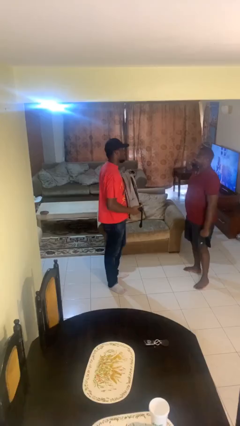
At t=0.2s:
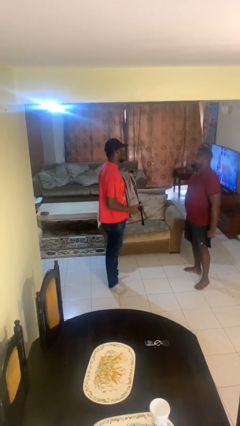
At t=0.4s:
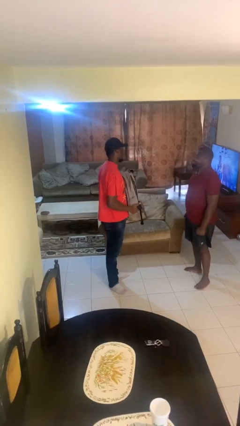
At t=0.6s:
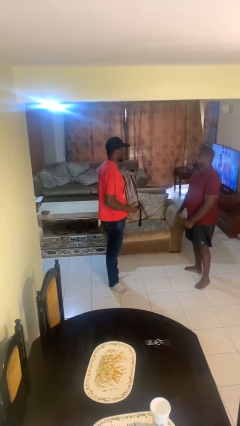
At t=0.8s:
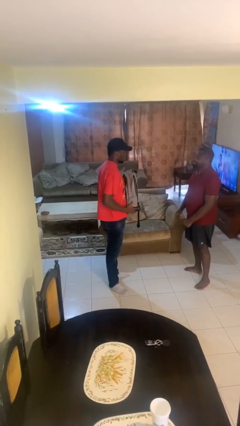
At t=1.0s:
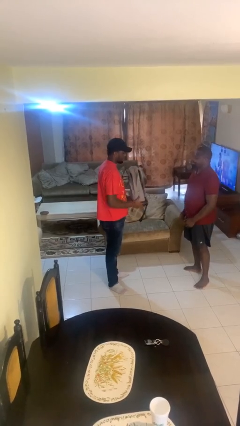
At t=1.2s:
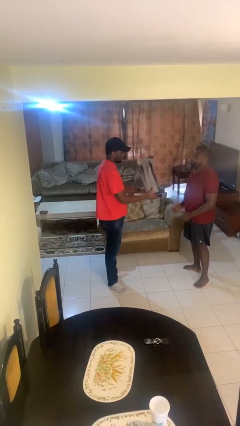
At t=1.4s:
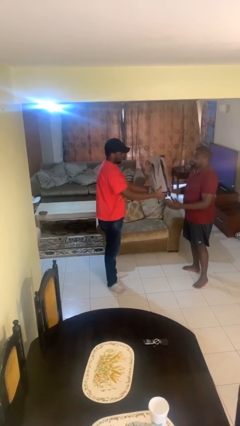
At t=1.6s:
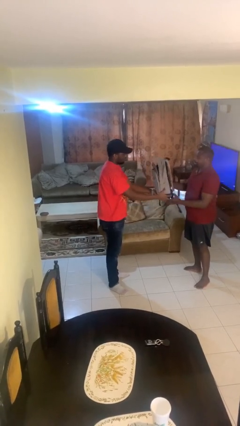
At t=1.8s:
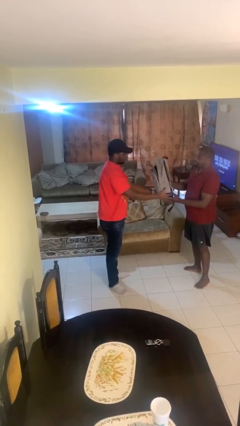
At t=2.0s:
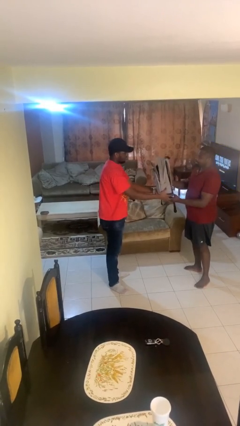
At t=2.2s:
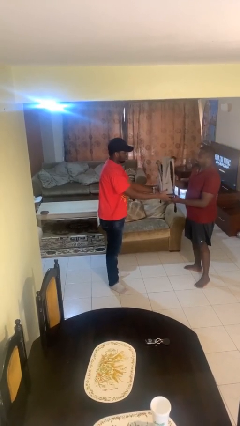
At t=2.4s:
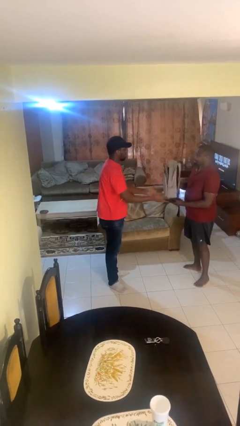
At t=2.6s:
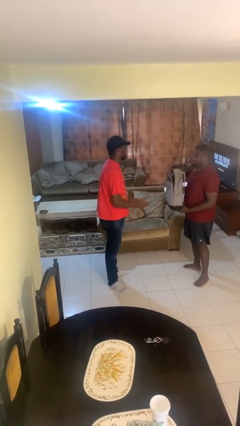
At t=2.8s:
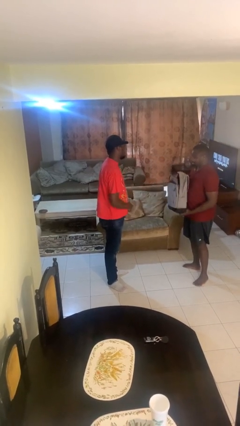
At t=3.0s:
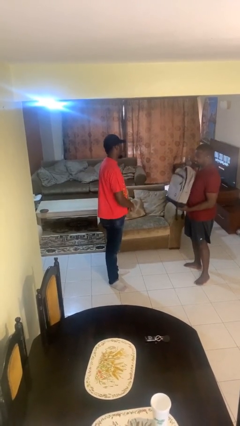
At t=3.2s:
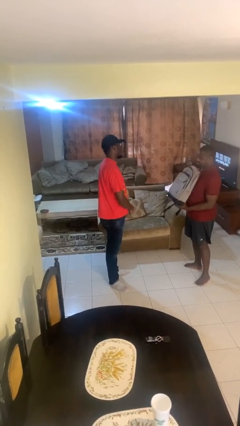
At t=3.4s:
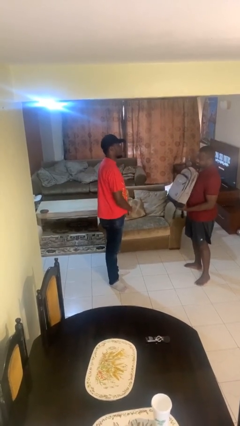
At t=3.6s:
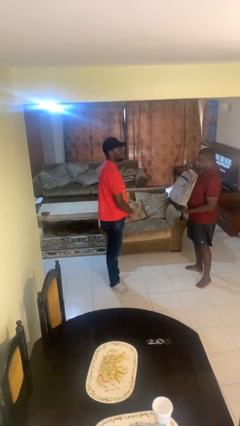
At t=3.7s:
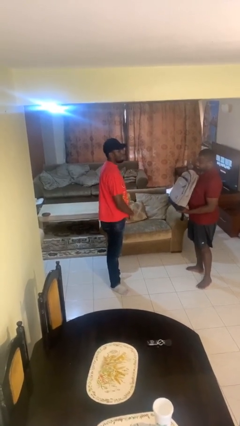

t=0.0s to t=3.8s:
person transfers object to person

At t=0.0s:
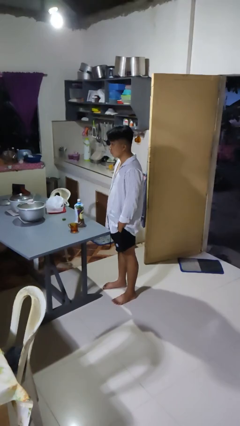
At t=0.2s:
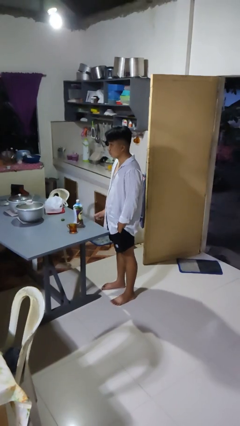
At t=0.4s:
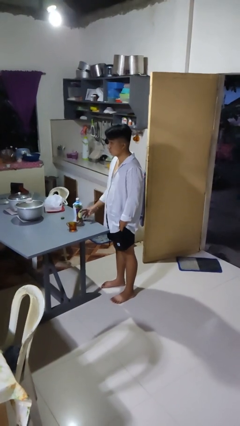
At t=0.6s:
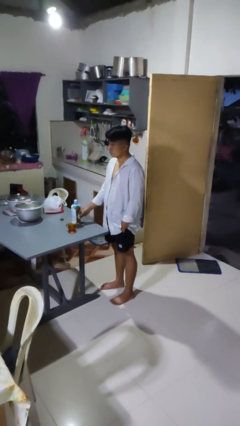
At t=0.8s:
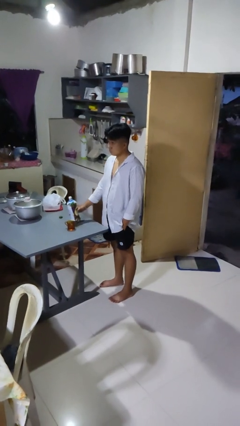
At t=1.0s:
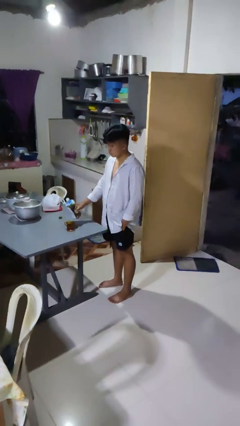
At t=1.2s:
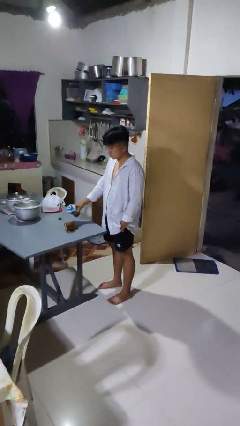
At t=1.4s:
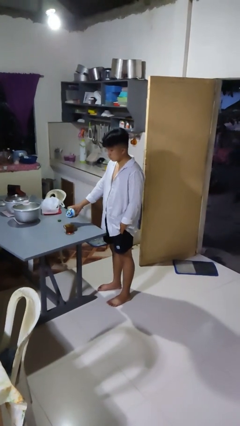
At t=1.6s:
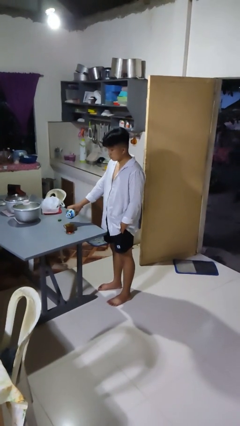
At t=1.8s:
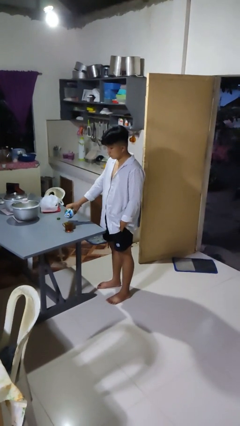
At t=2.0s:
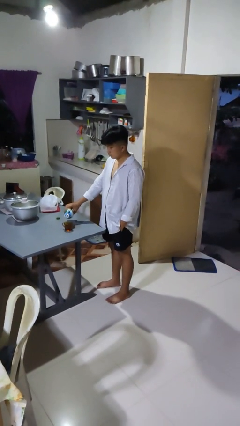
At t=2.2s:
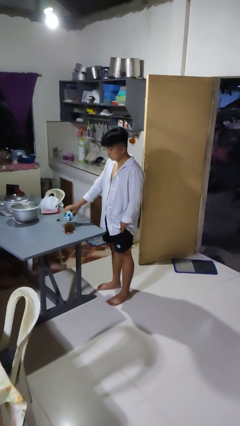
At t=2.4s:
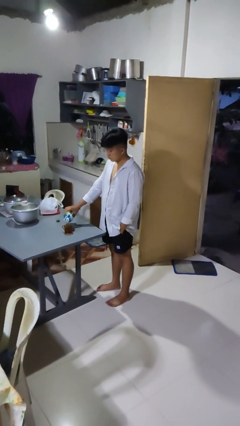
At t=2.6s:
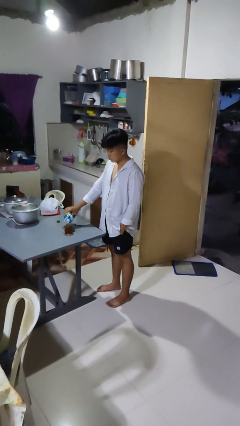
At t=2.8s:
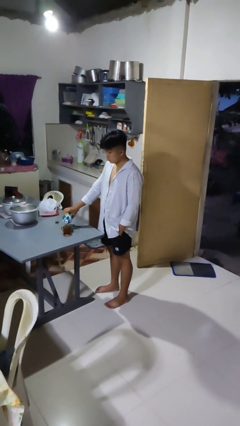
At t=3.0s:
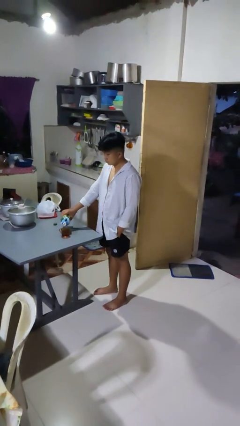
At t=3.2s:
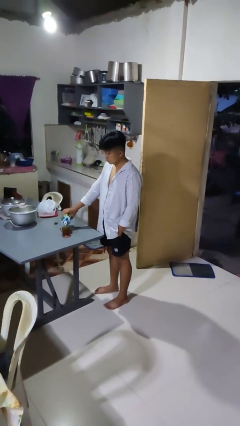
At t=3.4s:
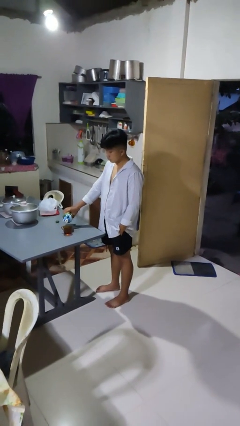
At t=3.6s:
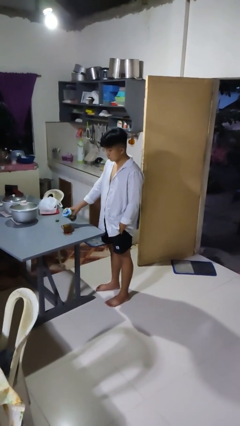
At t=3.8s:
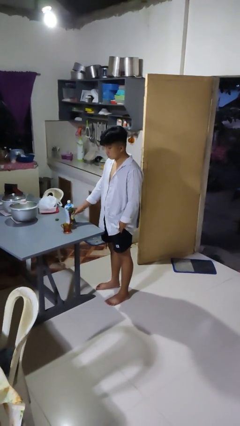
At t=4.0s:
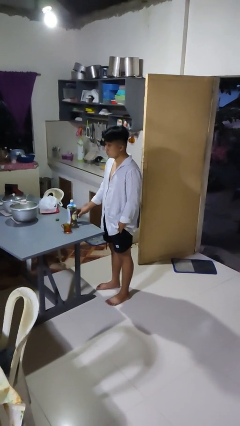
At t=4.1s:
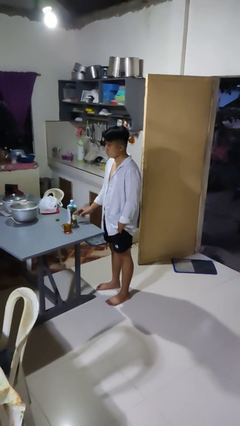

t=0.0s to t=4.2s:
person pours liquid into cup

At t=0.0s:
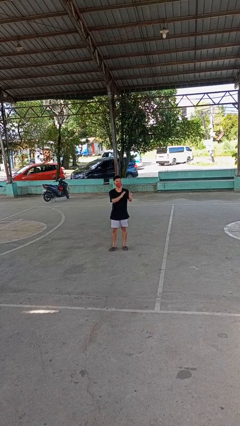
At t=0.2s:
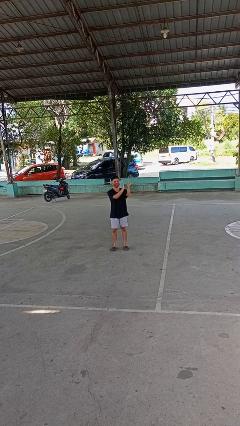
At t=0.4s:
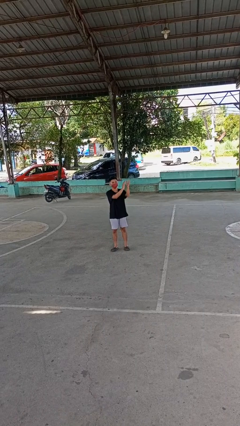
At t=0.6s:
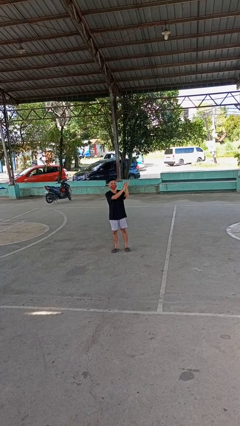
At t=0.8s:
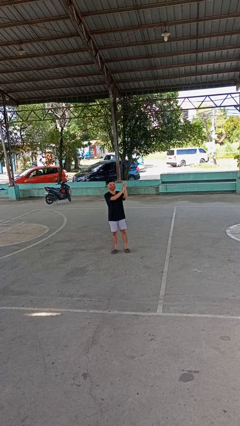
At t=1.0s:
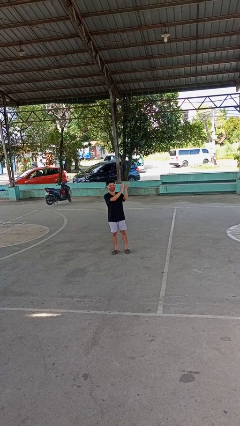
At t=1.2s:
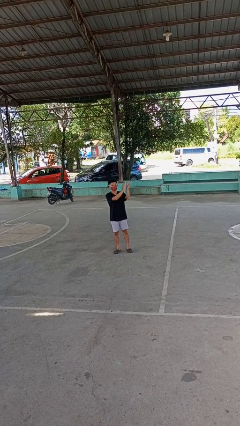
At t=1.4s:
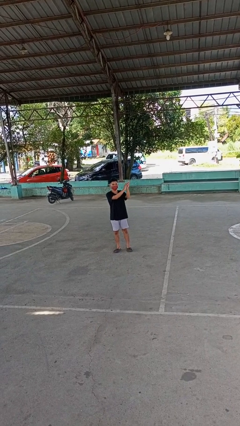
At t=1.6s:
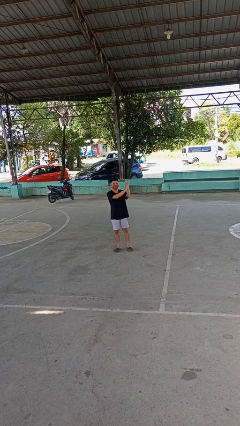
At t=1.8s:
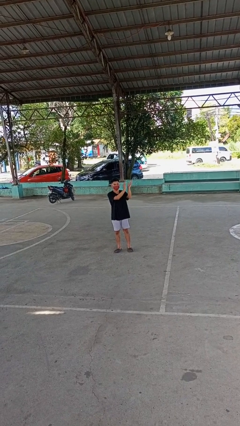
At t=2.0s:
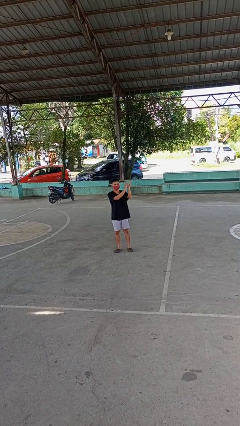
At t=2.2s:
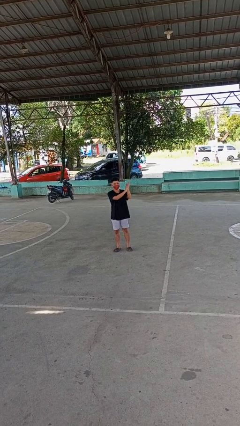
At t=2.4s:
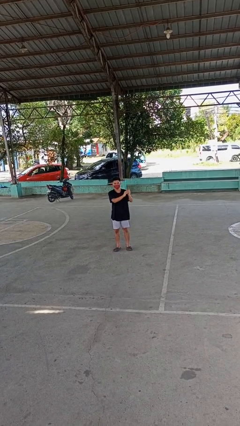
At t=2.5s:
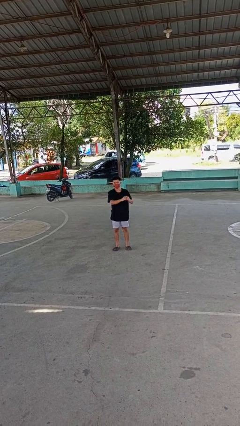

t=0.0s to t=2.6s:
person claps hands

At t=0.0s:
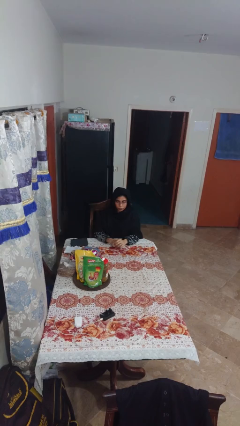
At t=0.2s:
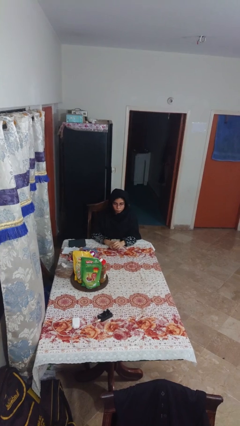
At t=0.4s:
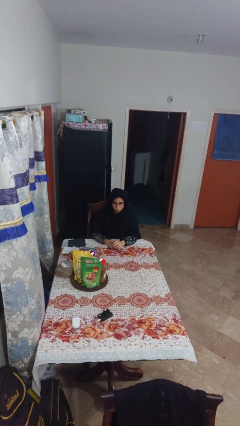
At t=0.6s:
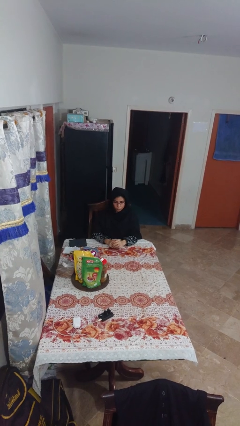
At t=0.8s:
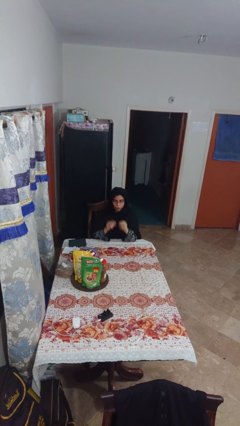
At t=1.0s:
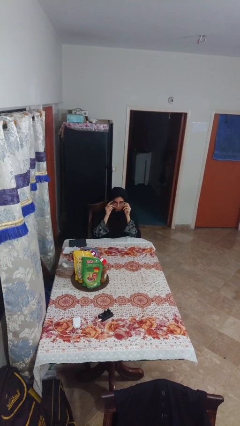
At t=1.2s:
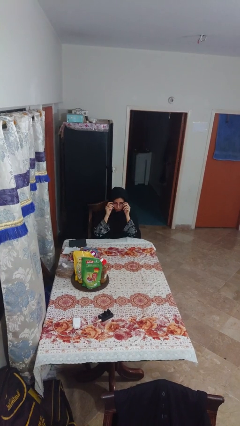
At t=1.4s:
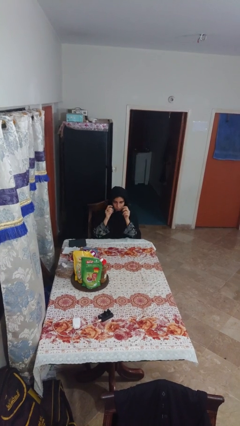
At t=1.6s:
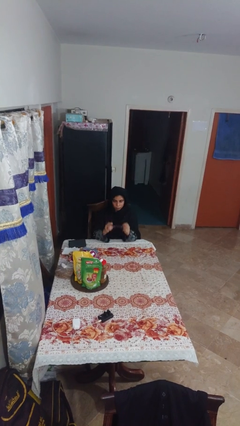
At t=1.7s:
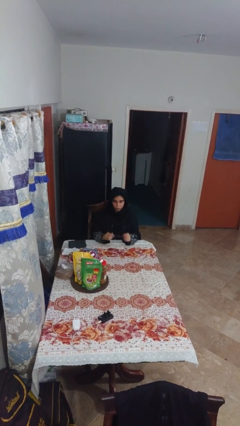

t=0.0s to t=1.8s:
person takes off glasses

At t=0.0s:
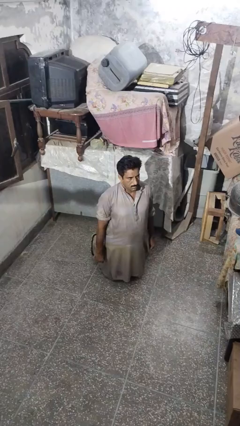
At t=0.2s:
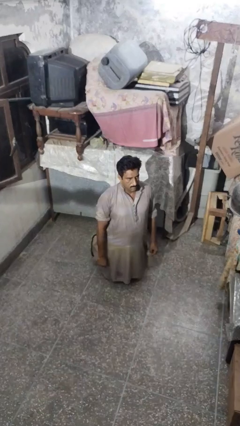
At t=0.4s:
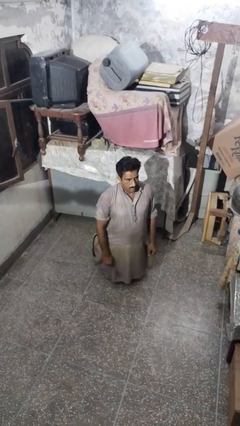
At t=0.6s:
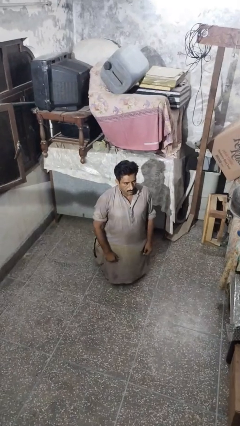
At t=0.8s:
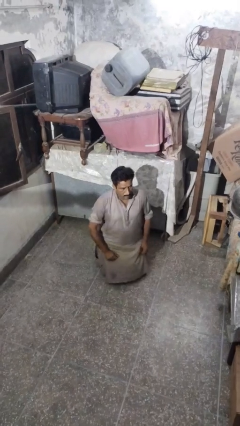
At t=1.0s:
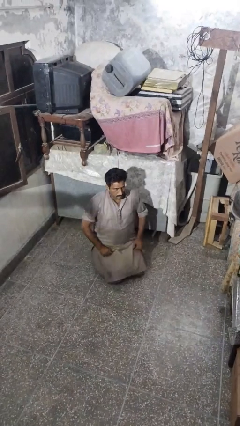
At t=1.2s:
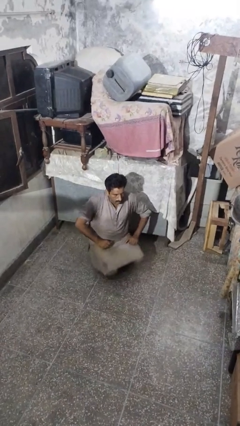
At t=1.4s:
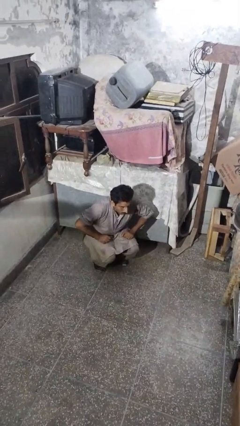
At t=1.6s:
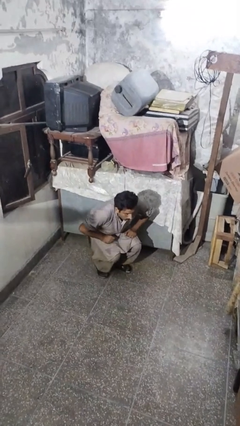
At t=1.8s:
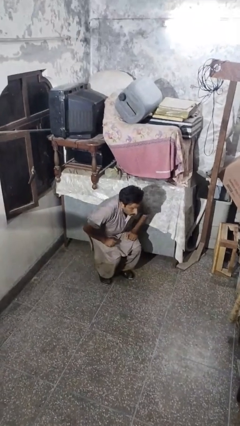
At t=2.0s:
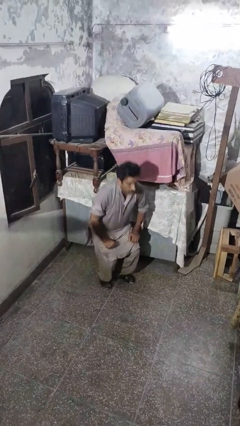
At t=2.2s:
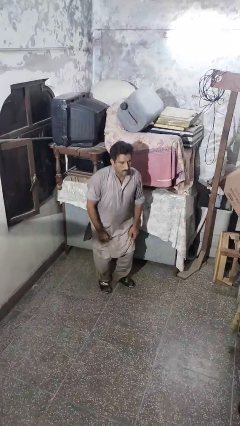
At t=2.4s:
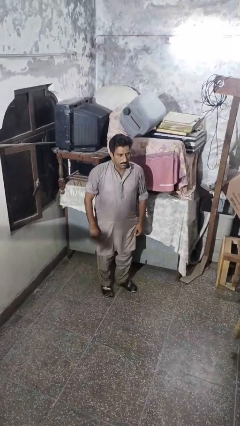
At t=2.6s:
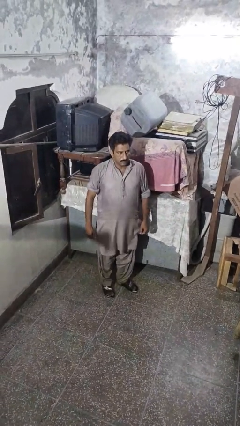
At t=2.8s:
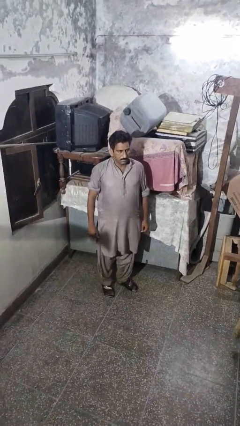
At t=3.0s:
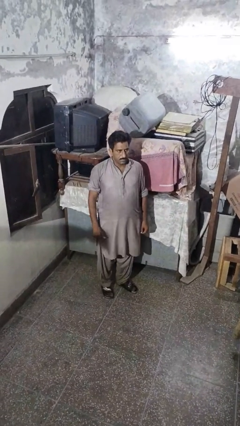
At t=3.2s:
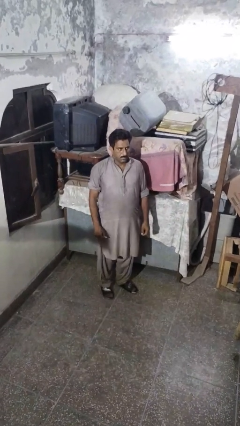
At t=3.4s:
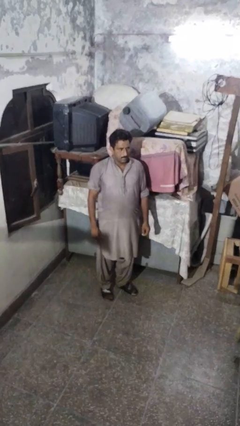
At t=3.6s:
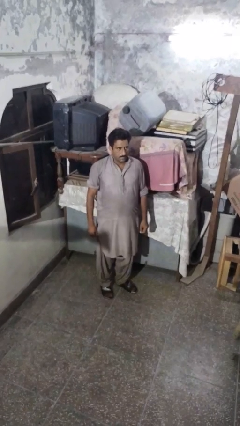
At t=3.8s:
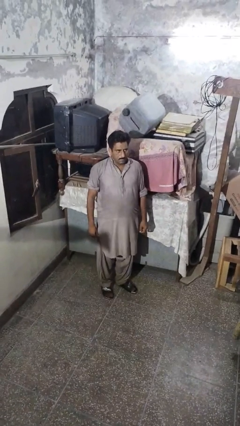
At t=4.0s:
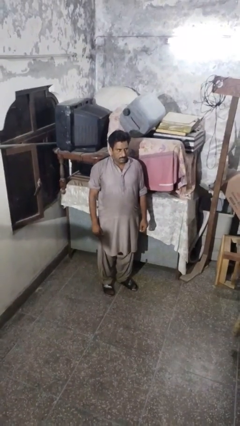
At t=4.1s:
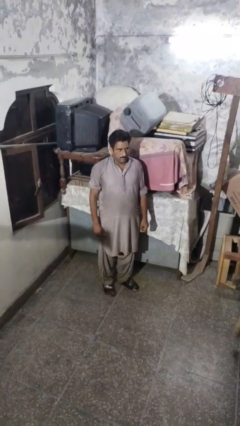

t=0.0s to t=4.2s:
person stands up from floor

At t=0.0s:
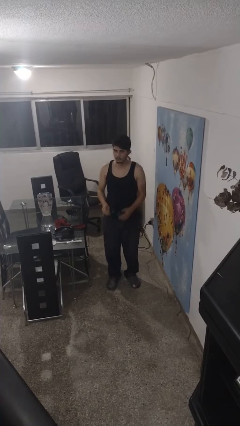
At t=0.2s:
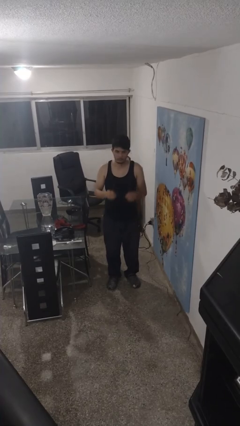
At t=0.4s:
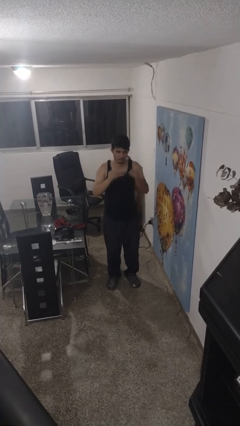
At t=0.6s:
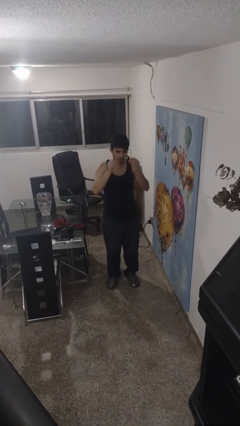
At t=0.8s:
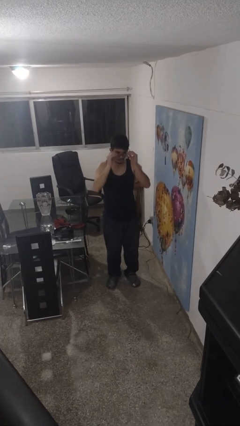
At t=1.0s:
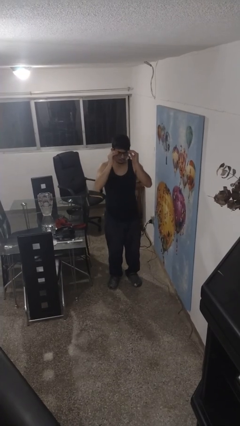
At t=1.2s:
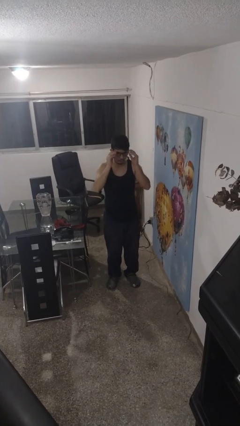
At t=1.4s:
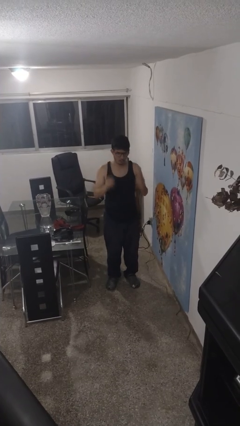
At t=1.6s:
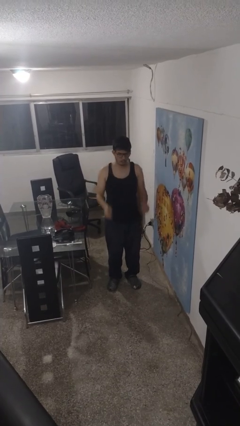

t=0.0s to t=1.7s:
person puts on glasses
